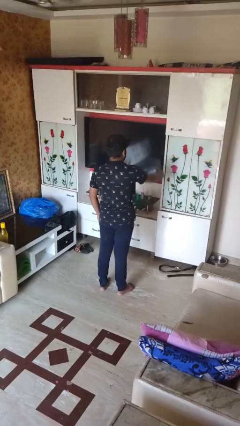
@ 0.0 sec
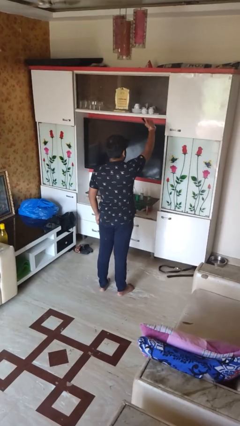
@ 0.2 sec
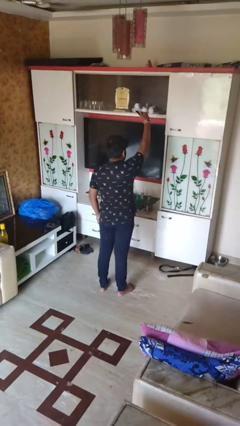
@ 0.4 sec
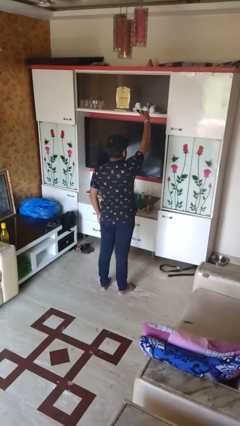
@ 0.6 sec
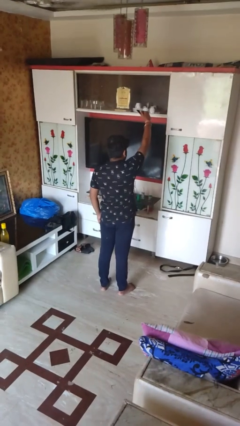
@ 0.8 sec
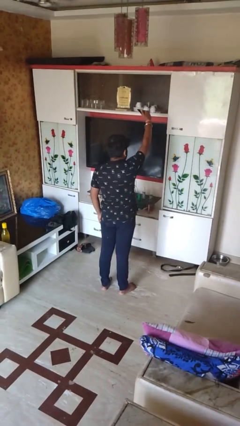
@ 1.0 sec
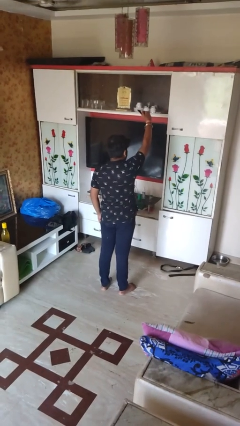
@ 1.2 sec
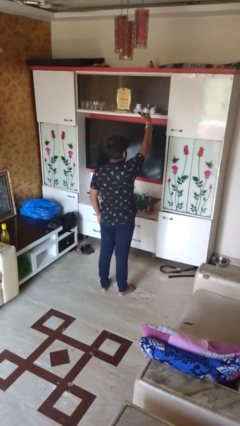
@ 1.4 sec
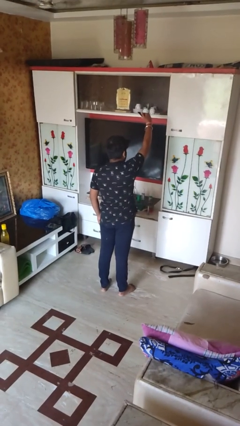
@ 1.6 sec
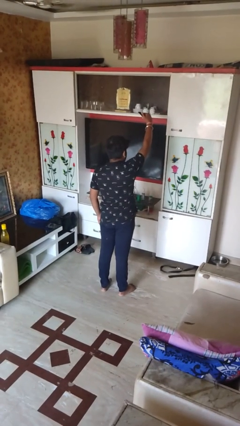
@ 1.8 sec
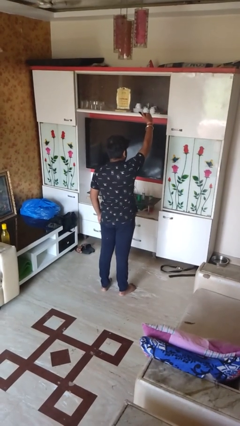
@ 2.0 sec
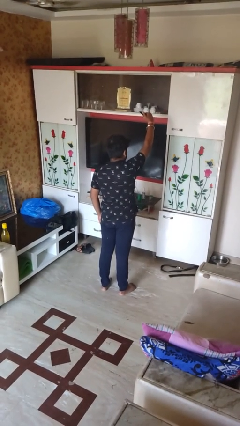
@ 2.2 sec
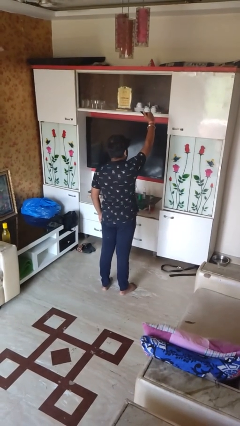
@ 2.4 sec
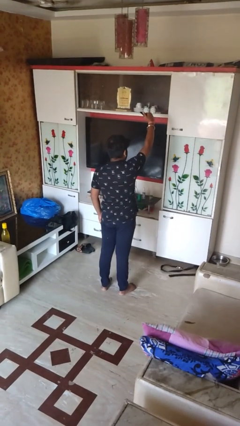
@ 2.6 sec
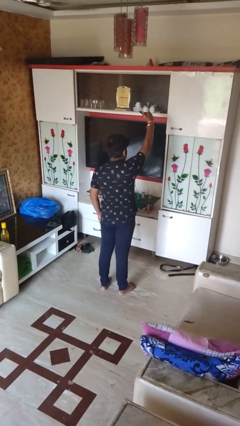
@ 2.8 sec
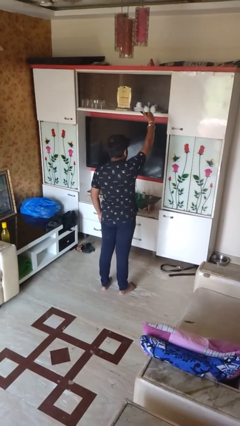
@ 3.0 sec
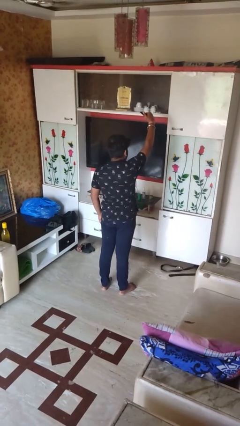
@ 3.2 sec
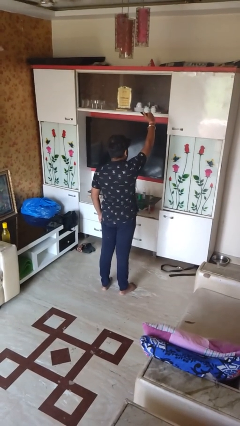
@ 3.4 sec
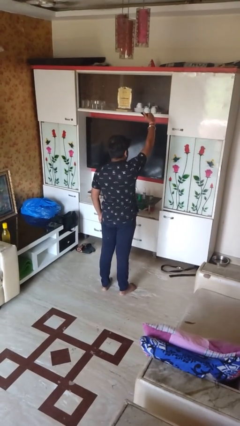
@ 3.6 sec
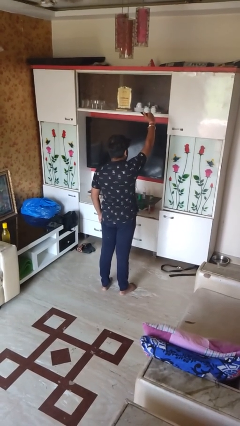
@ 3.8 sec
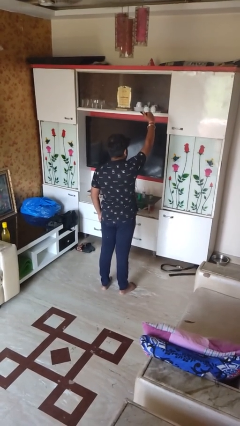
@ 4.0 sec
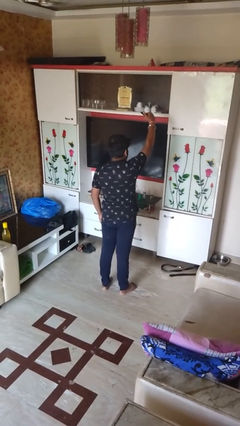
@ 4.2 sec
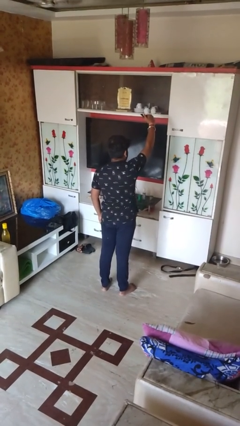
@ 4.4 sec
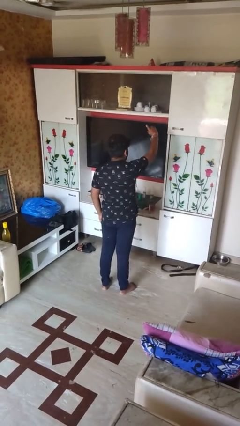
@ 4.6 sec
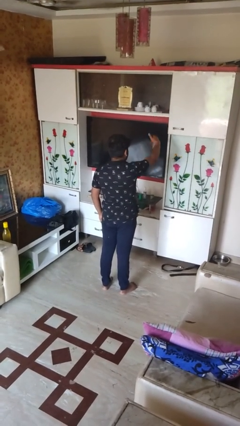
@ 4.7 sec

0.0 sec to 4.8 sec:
person takes selfie

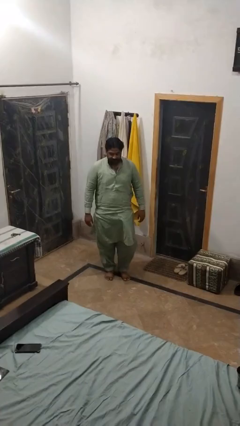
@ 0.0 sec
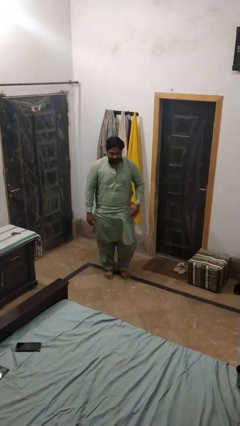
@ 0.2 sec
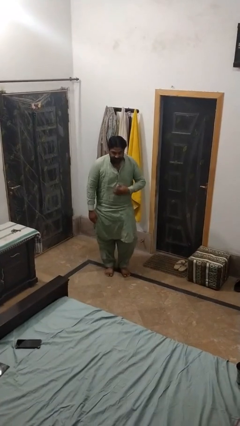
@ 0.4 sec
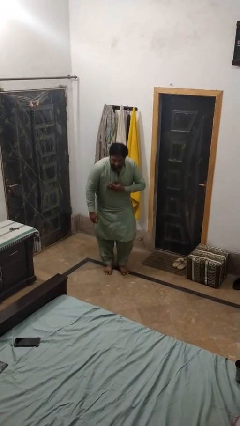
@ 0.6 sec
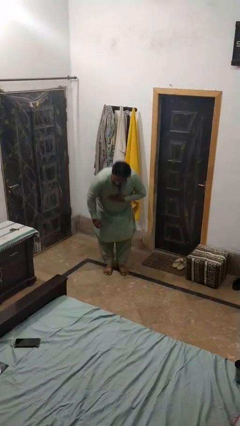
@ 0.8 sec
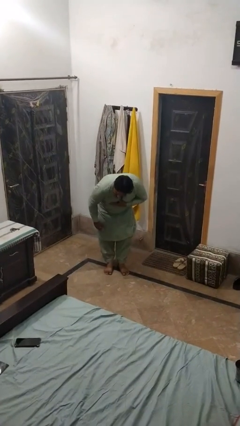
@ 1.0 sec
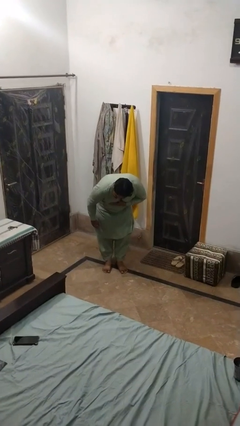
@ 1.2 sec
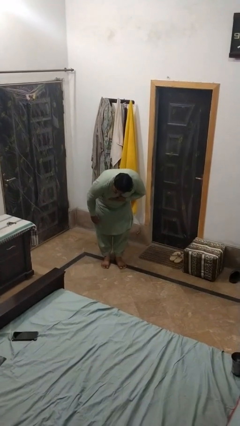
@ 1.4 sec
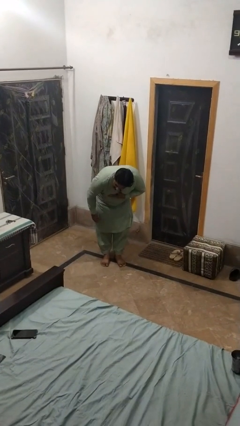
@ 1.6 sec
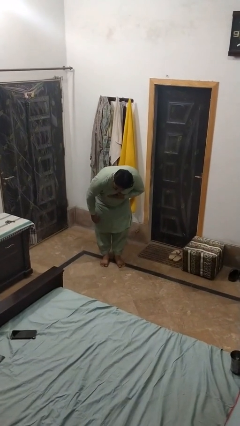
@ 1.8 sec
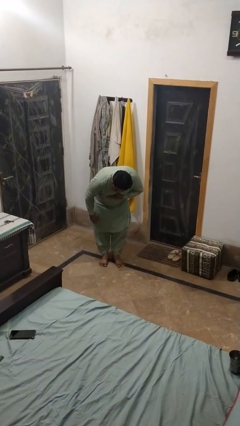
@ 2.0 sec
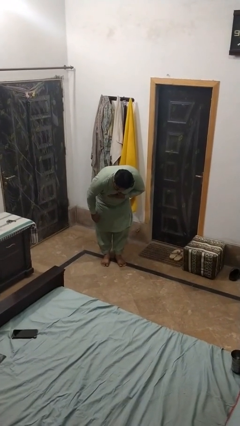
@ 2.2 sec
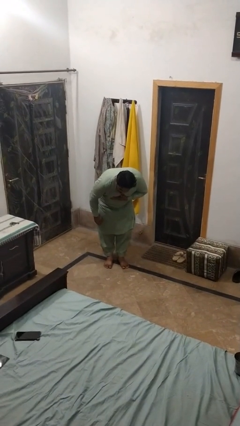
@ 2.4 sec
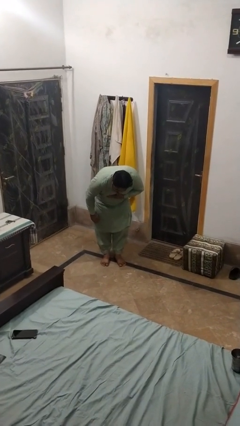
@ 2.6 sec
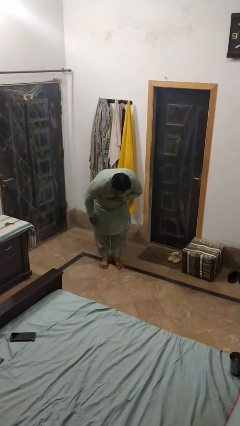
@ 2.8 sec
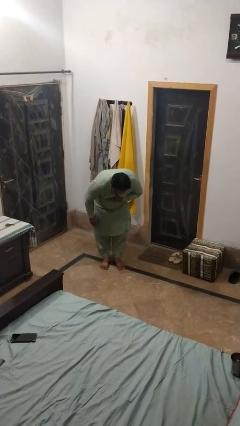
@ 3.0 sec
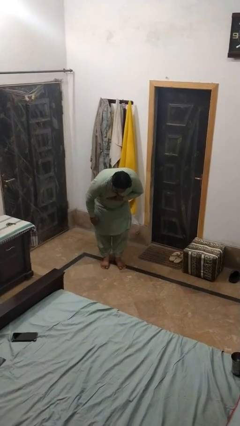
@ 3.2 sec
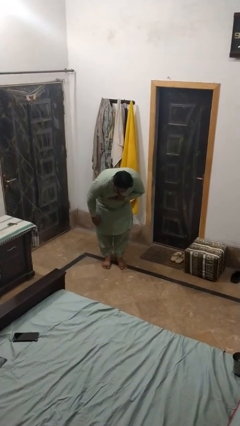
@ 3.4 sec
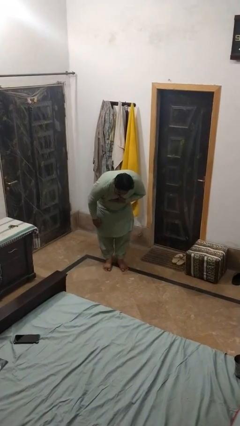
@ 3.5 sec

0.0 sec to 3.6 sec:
person bows

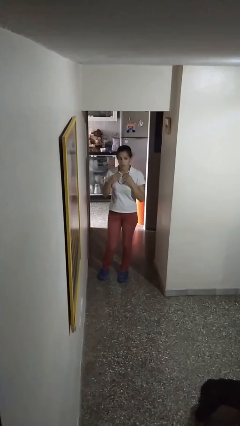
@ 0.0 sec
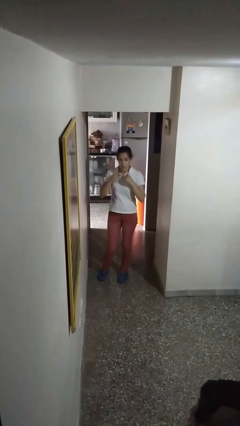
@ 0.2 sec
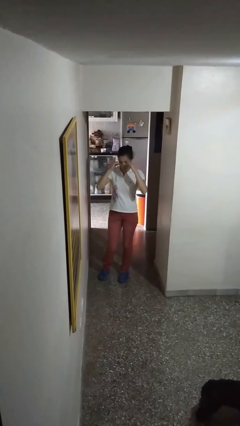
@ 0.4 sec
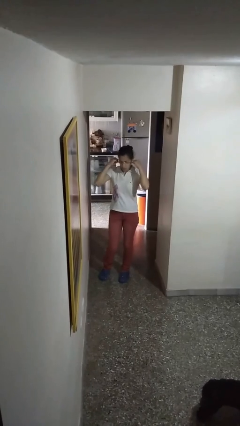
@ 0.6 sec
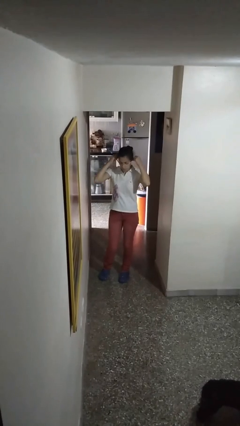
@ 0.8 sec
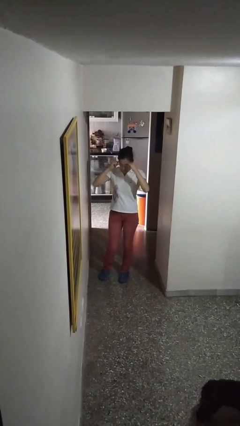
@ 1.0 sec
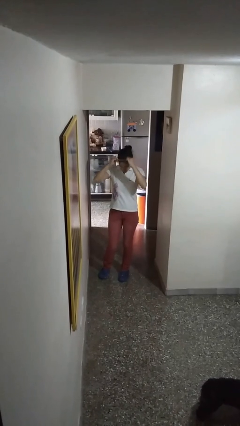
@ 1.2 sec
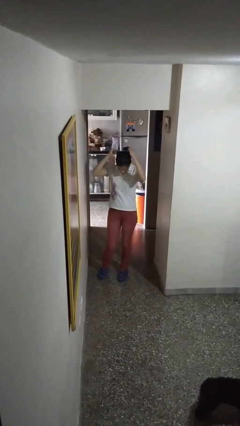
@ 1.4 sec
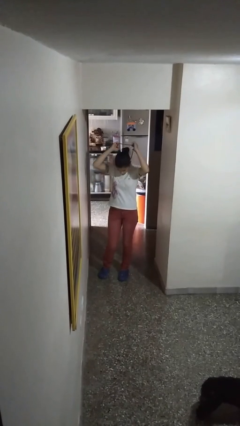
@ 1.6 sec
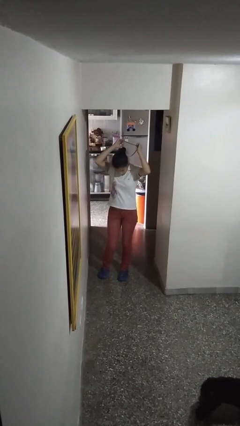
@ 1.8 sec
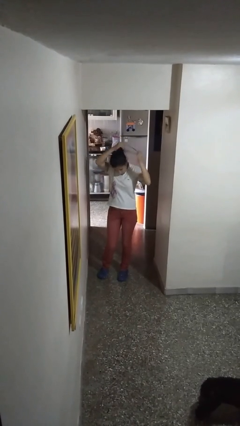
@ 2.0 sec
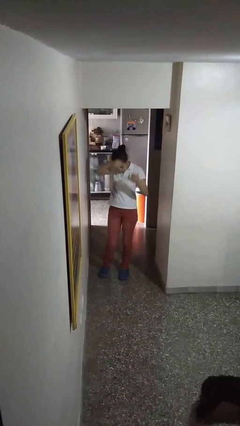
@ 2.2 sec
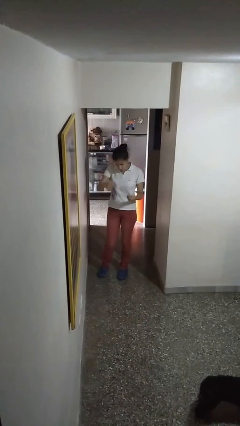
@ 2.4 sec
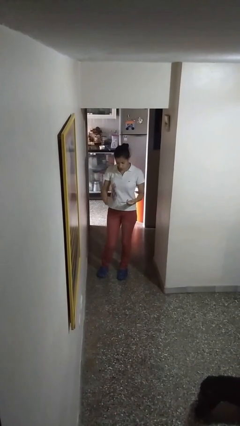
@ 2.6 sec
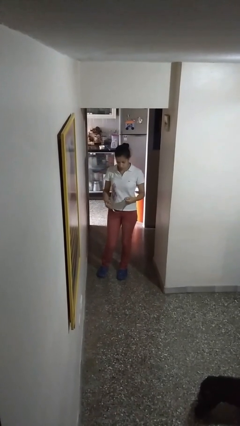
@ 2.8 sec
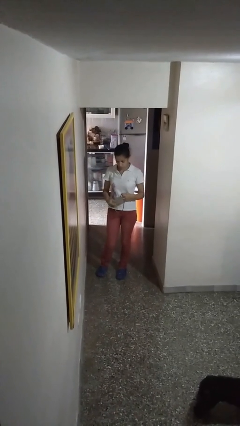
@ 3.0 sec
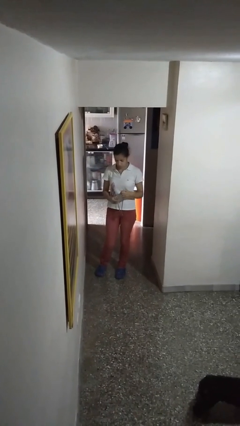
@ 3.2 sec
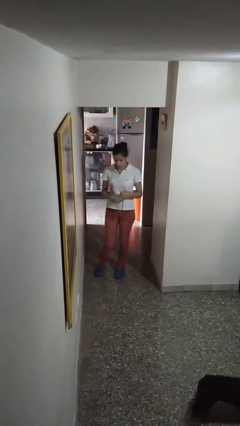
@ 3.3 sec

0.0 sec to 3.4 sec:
person takes off necklace

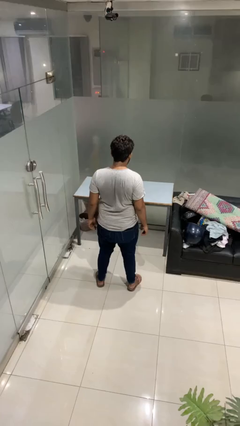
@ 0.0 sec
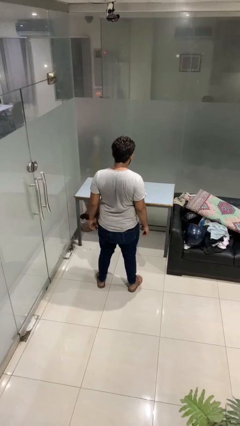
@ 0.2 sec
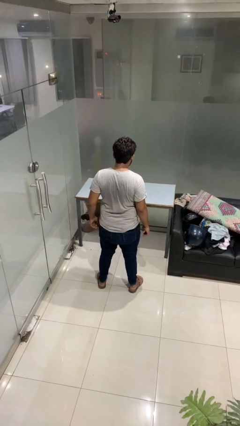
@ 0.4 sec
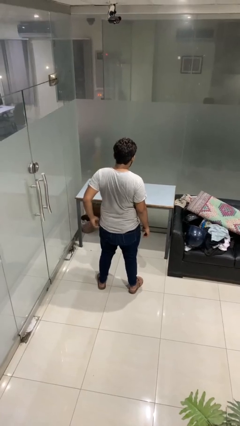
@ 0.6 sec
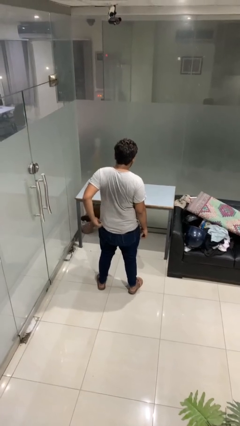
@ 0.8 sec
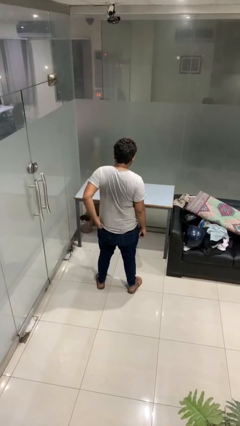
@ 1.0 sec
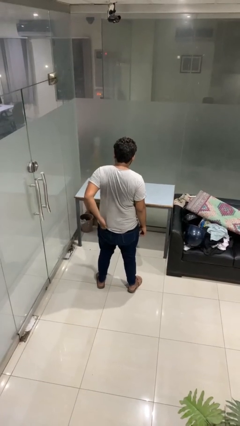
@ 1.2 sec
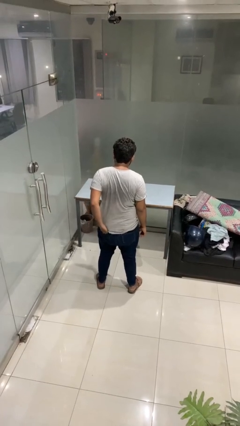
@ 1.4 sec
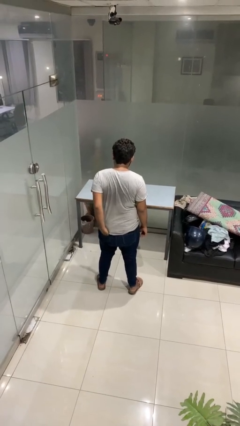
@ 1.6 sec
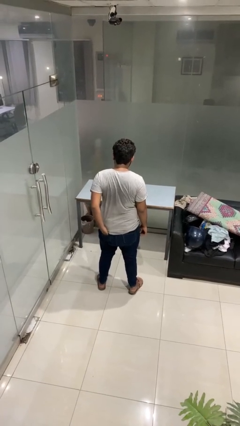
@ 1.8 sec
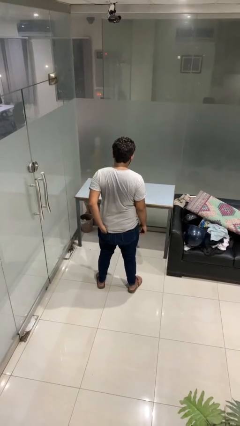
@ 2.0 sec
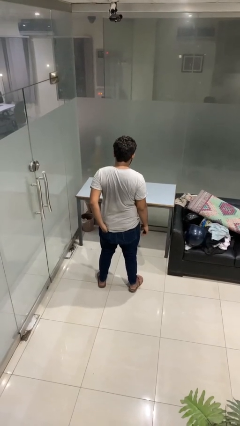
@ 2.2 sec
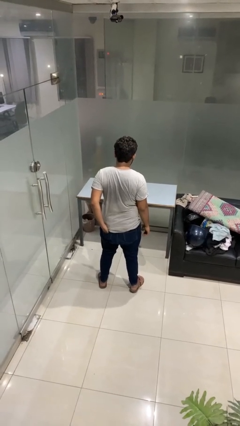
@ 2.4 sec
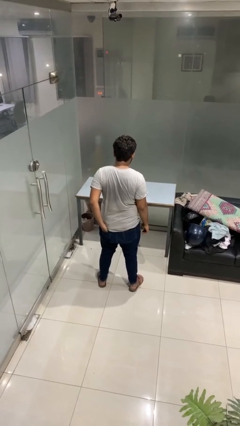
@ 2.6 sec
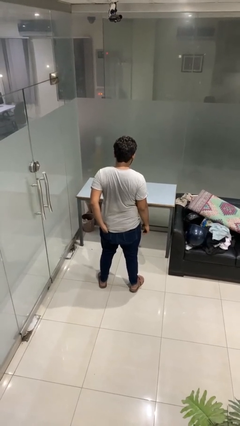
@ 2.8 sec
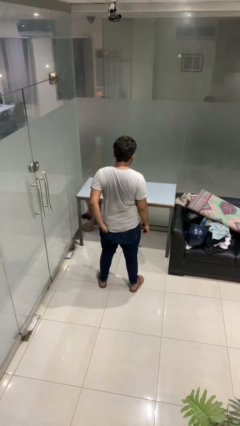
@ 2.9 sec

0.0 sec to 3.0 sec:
person puts hands in back pockets

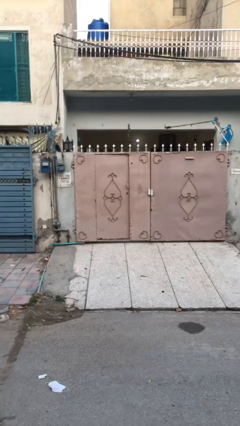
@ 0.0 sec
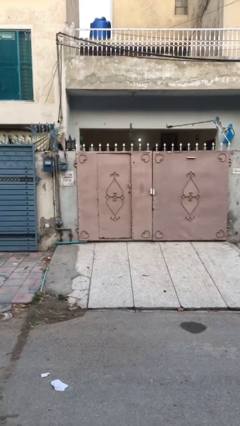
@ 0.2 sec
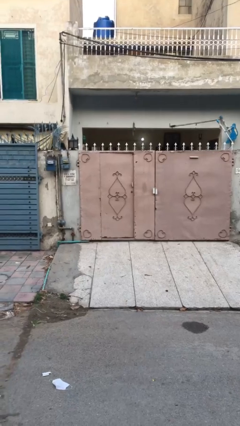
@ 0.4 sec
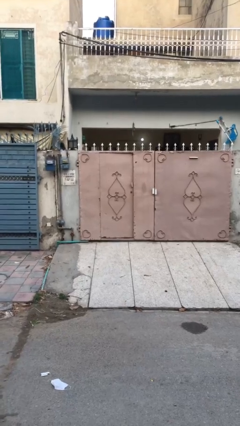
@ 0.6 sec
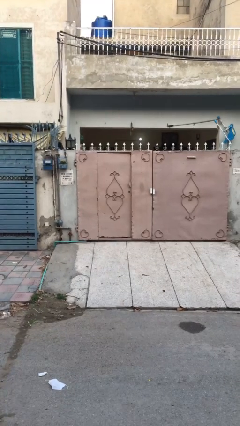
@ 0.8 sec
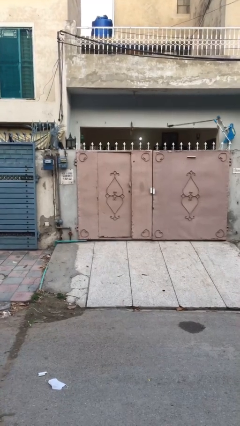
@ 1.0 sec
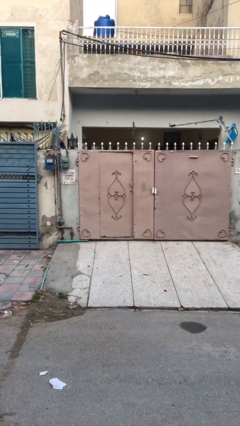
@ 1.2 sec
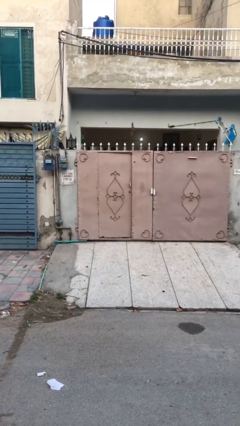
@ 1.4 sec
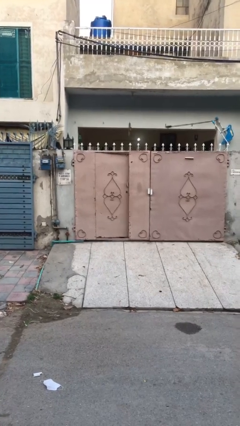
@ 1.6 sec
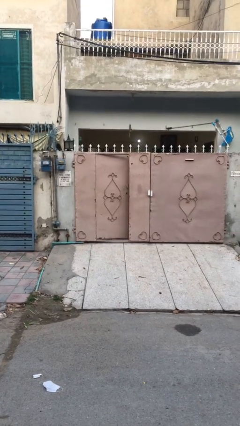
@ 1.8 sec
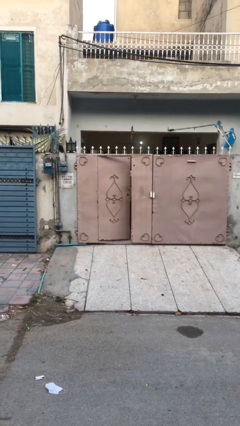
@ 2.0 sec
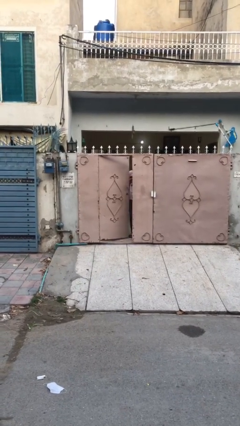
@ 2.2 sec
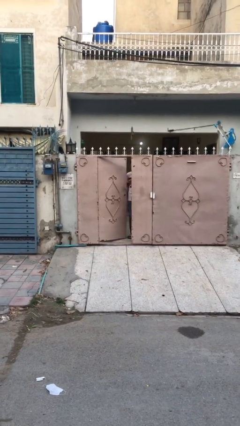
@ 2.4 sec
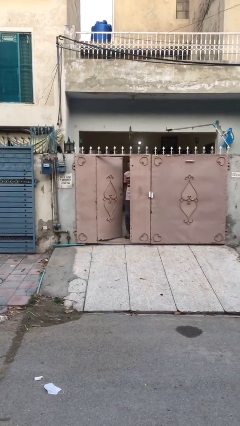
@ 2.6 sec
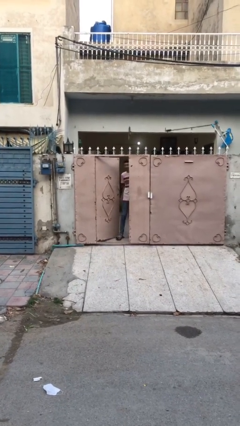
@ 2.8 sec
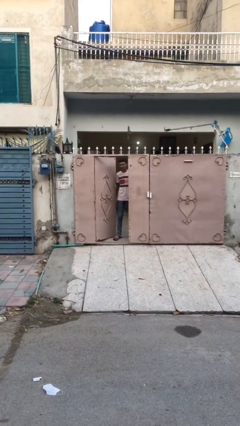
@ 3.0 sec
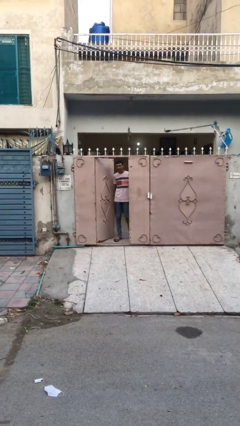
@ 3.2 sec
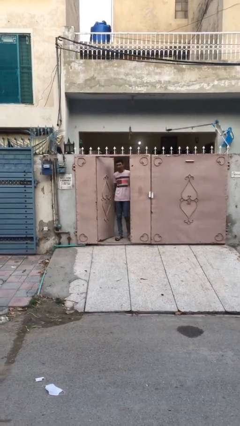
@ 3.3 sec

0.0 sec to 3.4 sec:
person opens facility door
